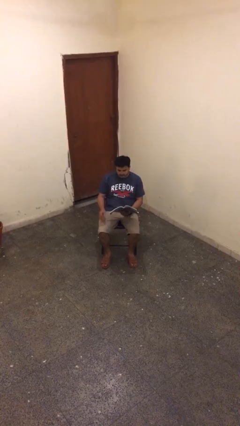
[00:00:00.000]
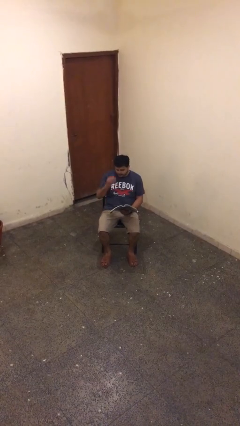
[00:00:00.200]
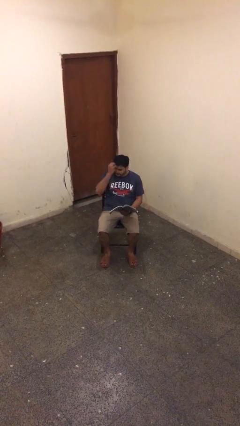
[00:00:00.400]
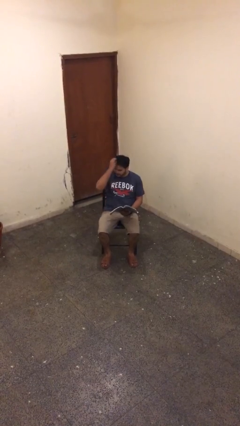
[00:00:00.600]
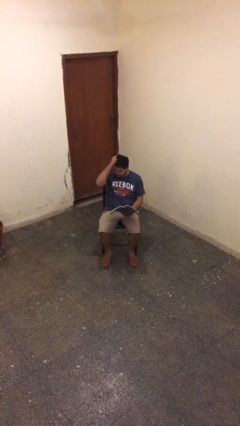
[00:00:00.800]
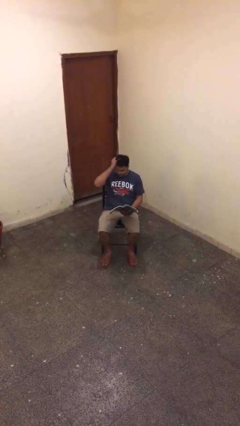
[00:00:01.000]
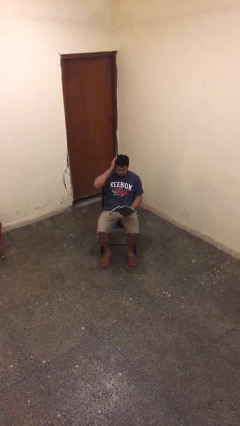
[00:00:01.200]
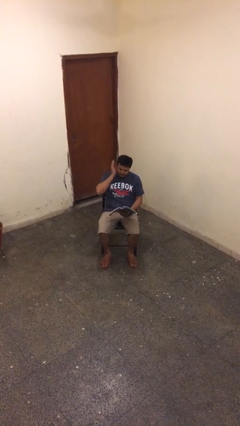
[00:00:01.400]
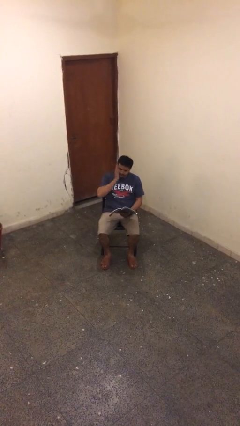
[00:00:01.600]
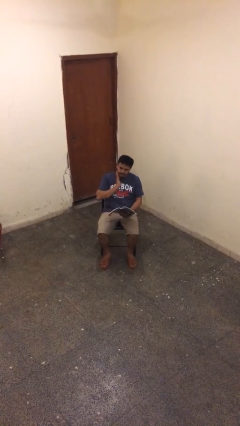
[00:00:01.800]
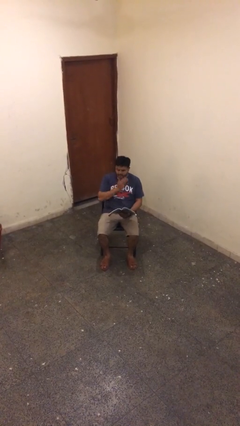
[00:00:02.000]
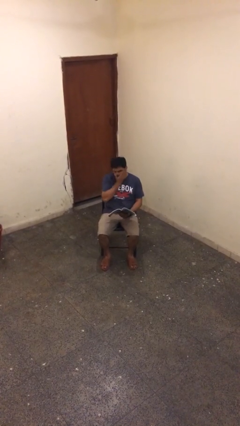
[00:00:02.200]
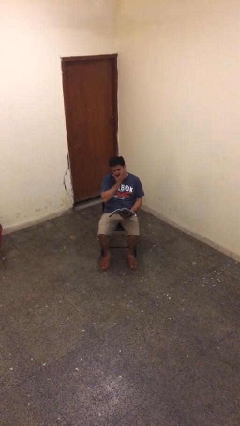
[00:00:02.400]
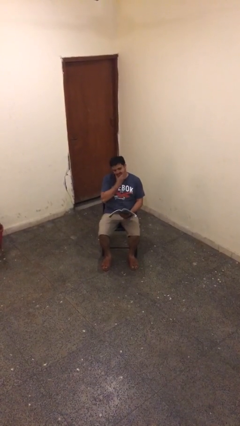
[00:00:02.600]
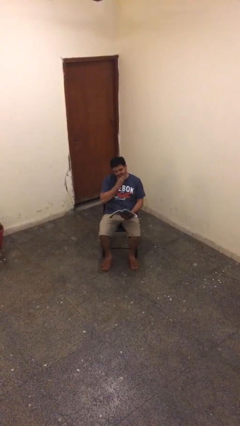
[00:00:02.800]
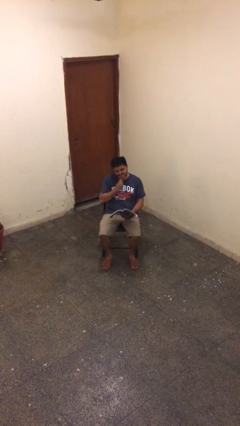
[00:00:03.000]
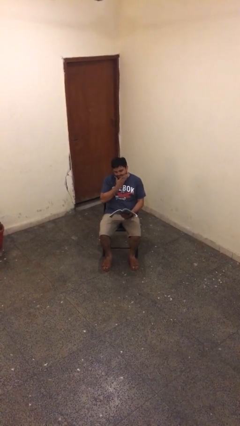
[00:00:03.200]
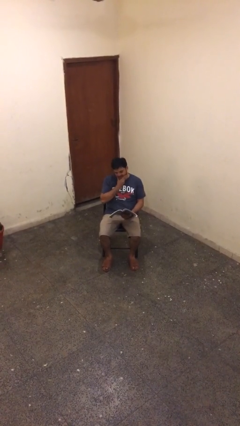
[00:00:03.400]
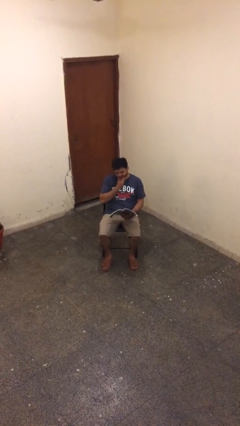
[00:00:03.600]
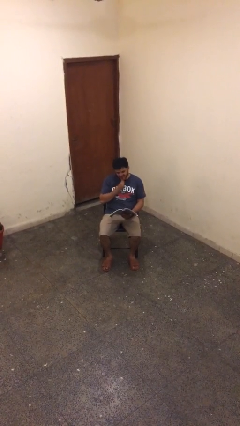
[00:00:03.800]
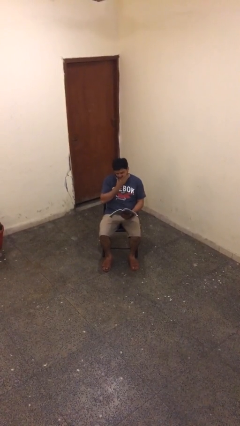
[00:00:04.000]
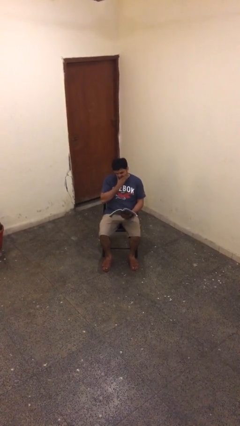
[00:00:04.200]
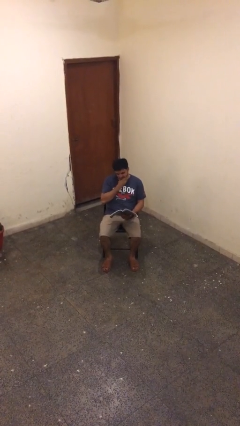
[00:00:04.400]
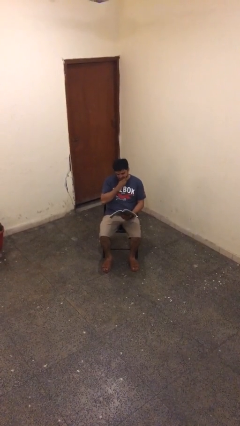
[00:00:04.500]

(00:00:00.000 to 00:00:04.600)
person reads document

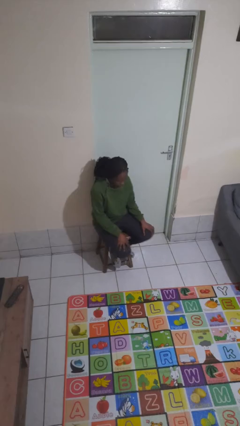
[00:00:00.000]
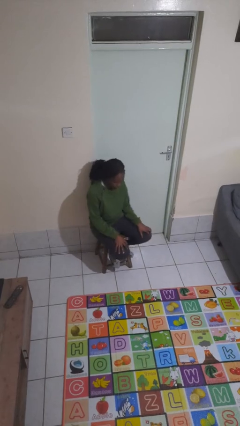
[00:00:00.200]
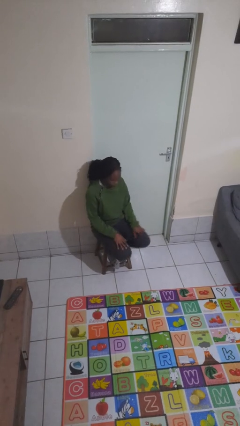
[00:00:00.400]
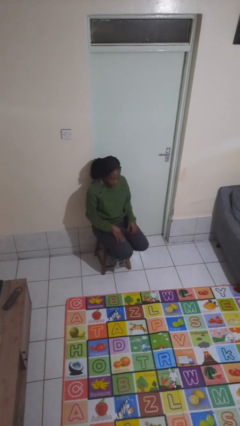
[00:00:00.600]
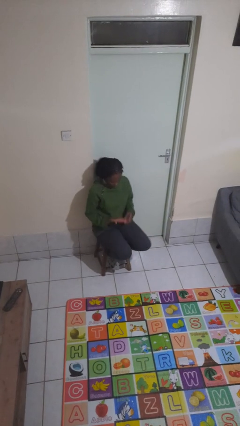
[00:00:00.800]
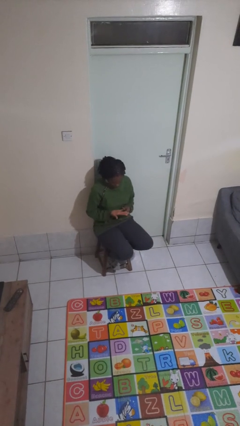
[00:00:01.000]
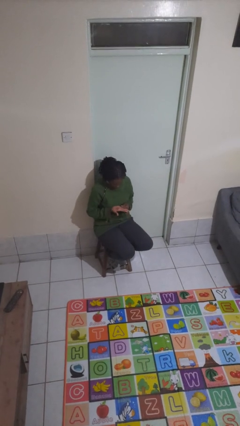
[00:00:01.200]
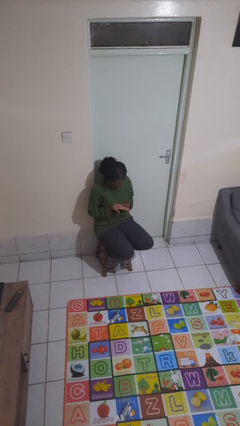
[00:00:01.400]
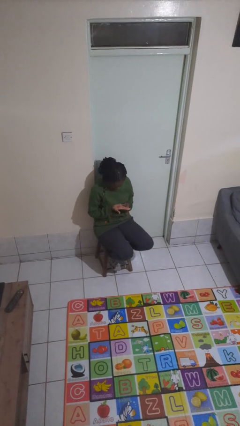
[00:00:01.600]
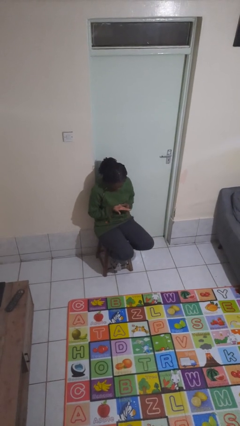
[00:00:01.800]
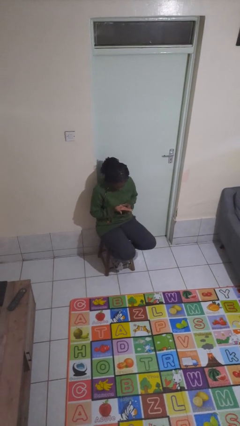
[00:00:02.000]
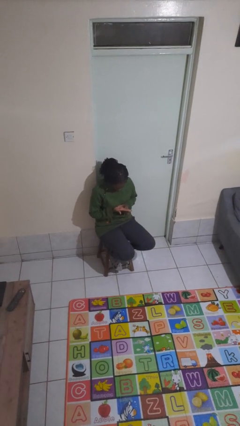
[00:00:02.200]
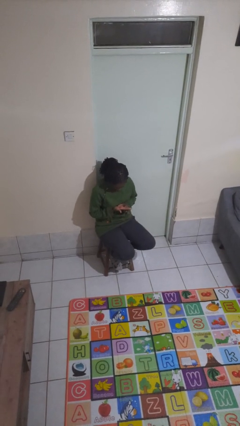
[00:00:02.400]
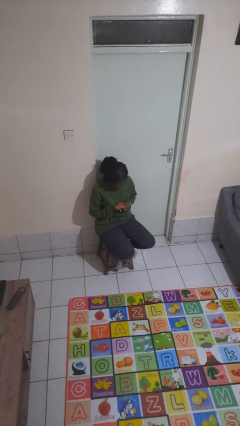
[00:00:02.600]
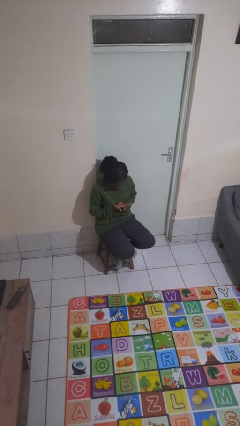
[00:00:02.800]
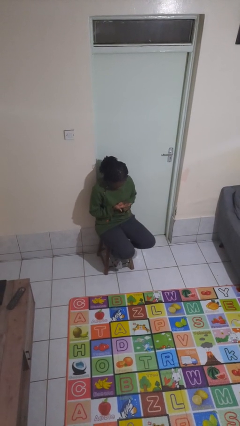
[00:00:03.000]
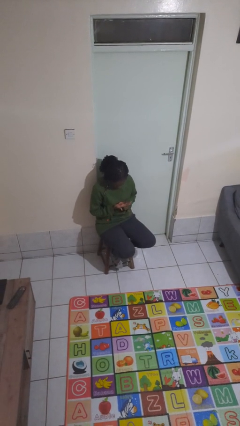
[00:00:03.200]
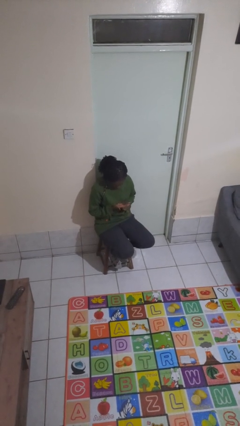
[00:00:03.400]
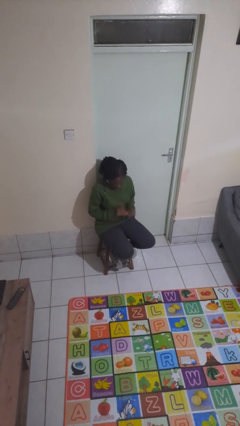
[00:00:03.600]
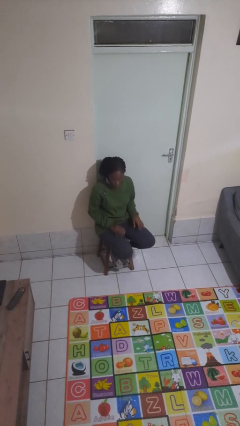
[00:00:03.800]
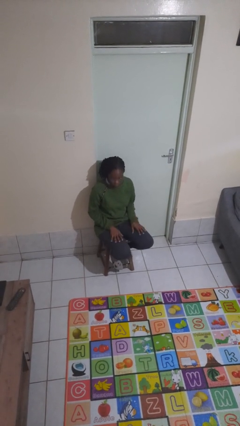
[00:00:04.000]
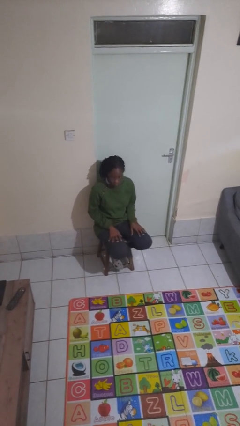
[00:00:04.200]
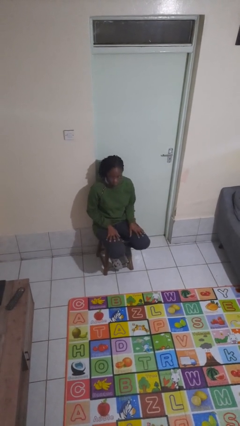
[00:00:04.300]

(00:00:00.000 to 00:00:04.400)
person looks at hands in lap

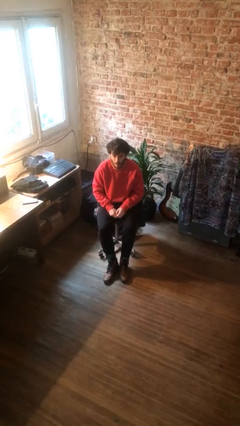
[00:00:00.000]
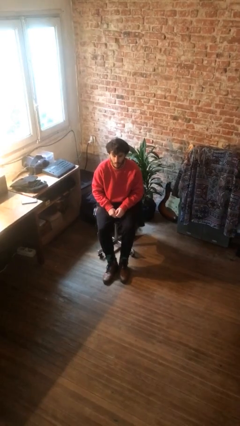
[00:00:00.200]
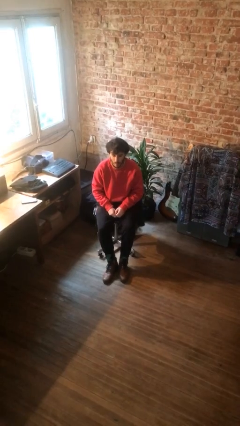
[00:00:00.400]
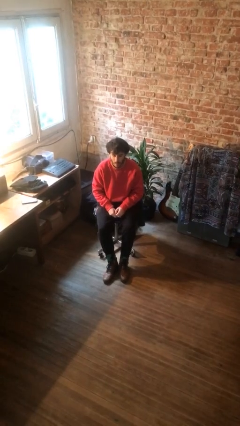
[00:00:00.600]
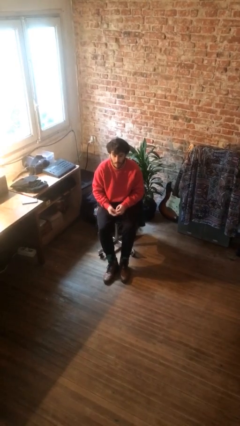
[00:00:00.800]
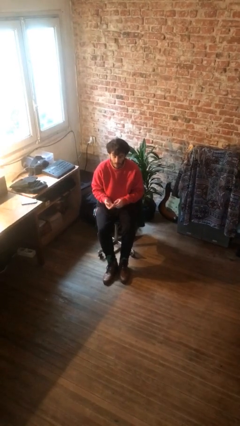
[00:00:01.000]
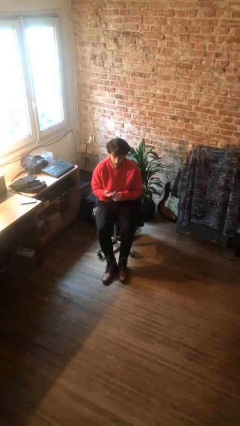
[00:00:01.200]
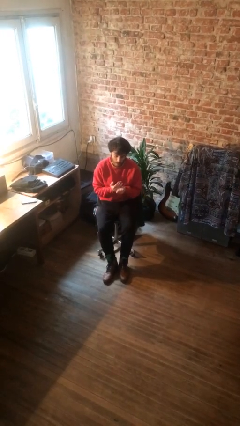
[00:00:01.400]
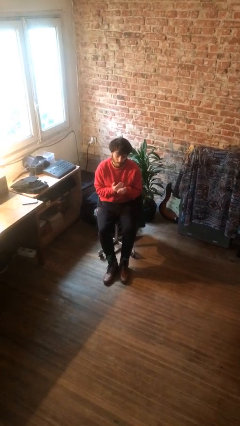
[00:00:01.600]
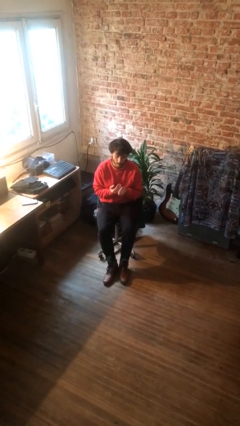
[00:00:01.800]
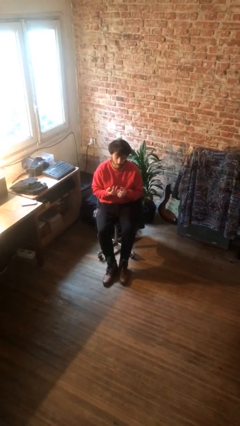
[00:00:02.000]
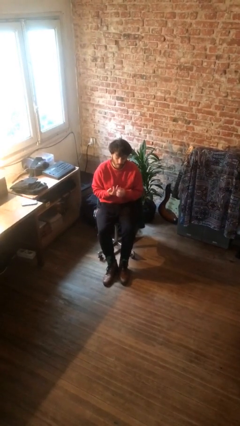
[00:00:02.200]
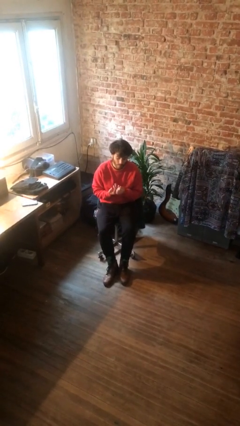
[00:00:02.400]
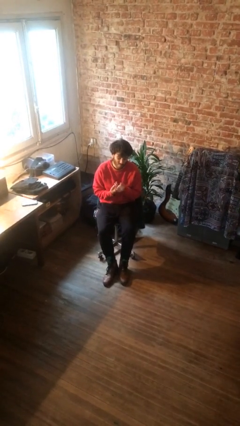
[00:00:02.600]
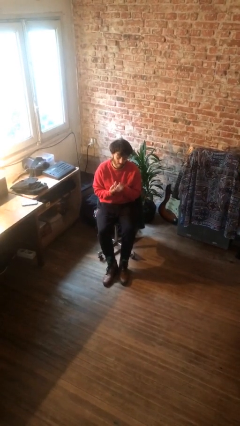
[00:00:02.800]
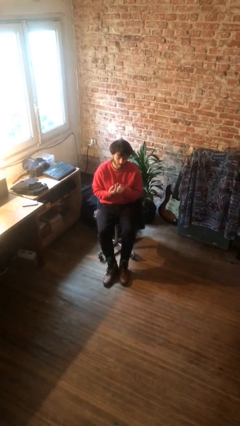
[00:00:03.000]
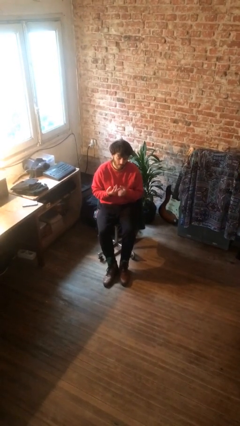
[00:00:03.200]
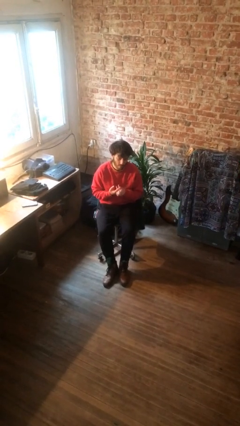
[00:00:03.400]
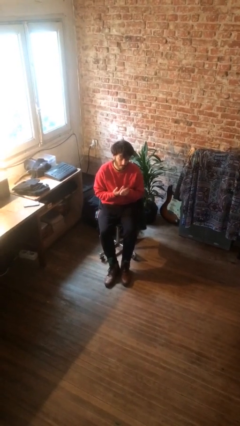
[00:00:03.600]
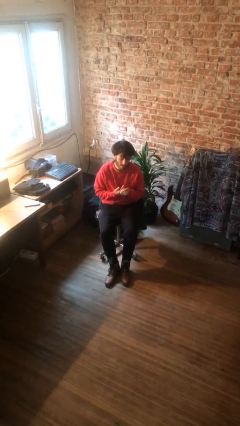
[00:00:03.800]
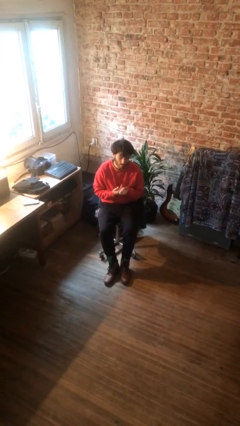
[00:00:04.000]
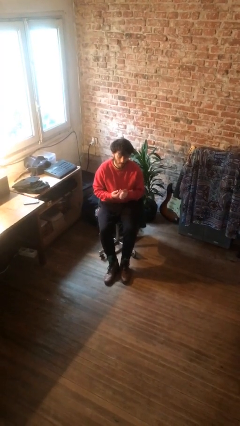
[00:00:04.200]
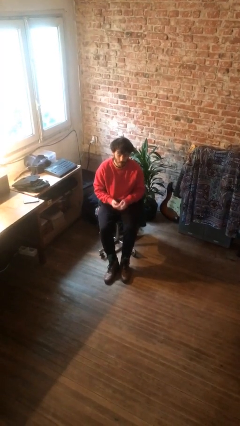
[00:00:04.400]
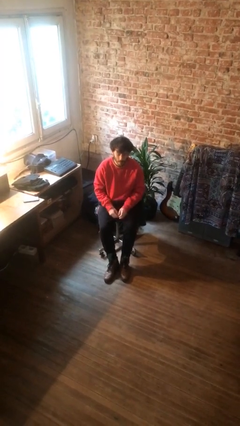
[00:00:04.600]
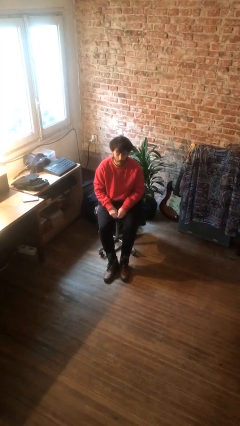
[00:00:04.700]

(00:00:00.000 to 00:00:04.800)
person cracks knuckles

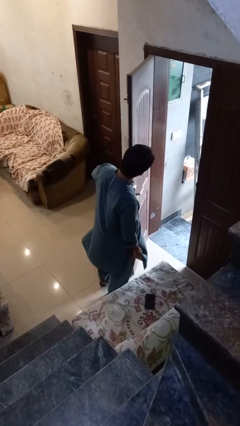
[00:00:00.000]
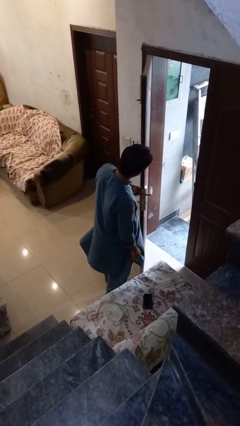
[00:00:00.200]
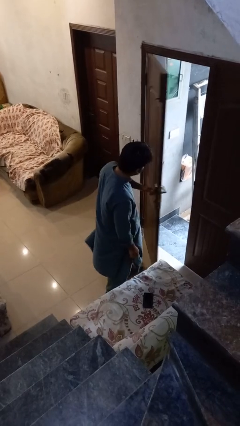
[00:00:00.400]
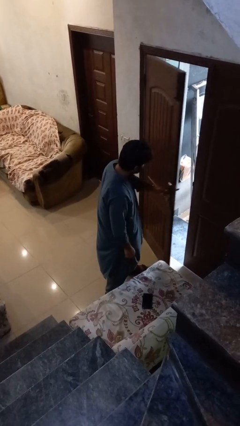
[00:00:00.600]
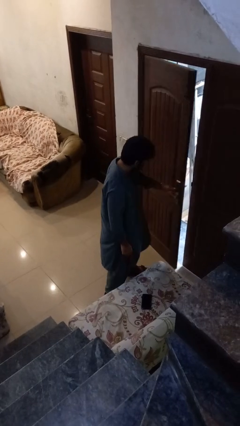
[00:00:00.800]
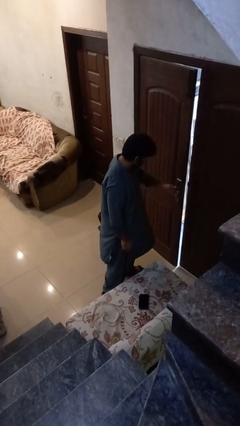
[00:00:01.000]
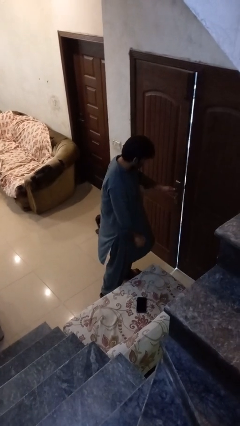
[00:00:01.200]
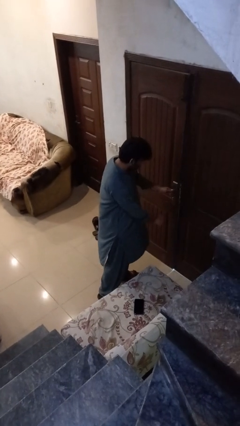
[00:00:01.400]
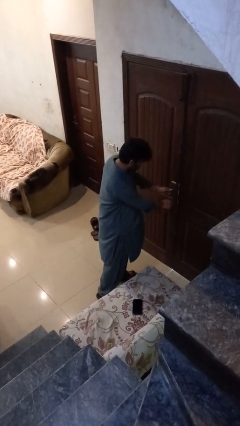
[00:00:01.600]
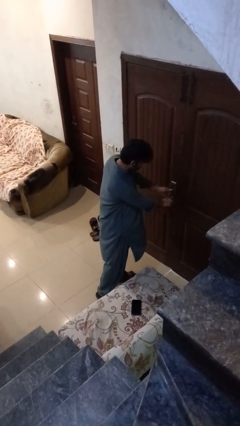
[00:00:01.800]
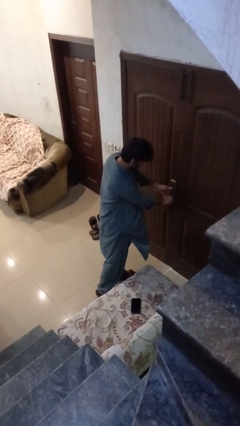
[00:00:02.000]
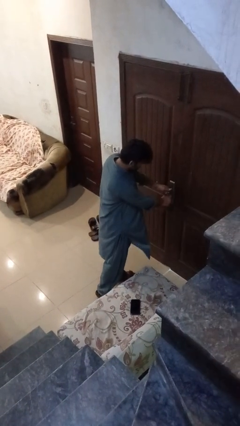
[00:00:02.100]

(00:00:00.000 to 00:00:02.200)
person closes facility door

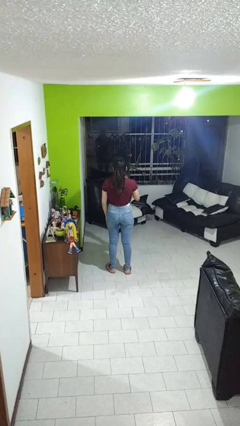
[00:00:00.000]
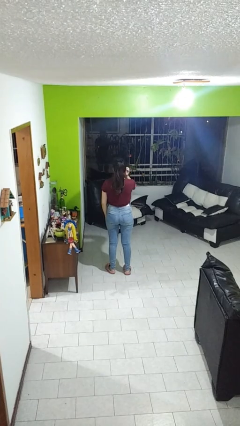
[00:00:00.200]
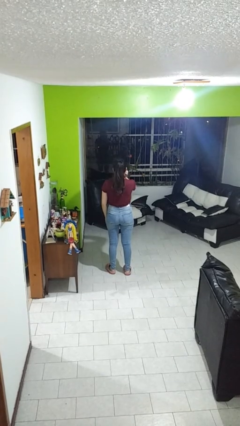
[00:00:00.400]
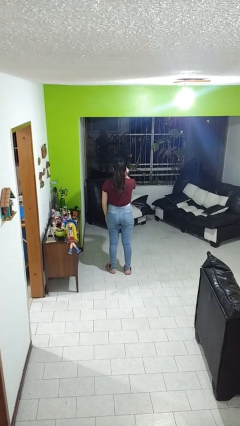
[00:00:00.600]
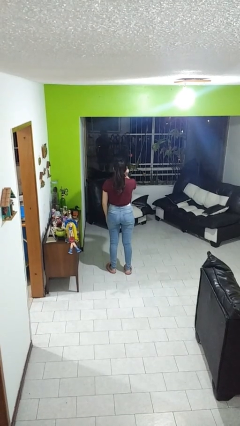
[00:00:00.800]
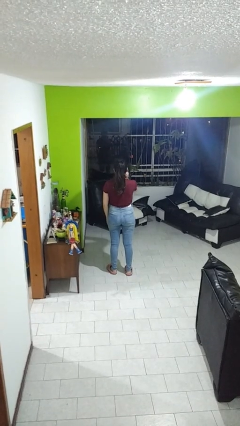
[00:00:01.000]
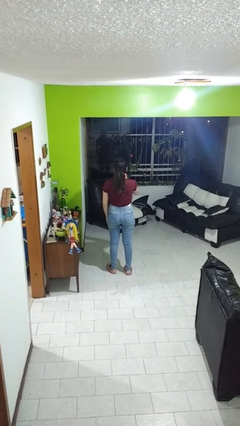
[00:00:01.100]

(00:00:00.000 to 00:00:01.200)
person scratches face

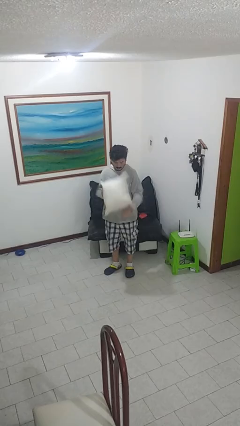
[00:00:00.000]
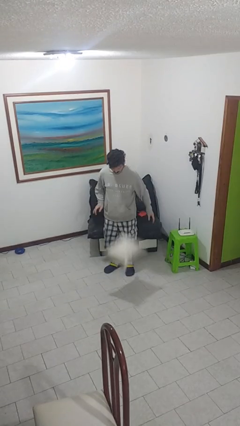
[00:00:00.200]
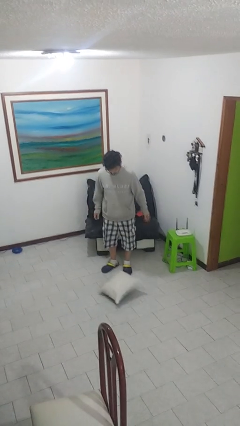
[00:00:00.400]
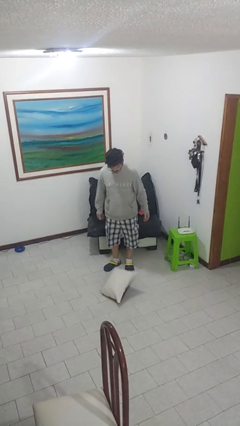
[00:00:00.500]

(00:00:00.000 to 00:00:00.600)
person drops object
